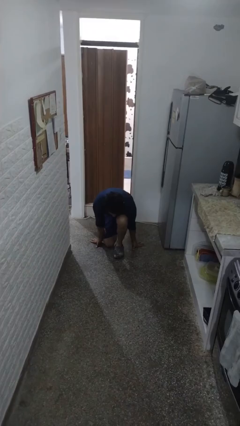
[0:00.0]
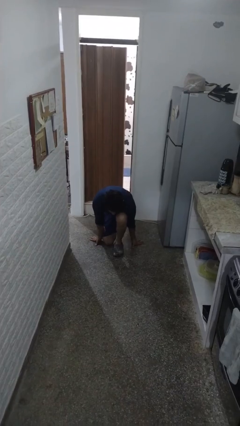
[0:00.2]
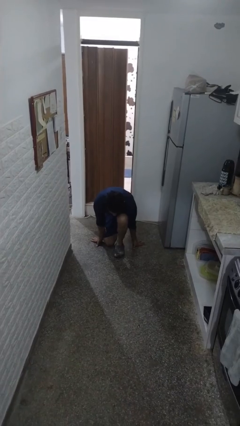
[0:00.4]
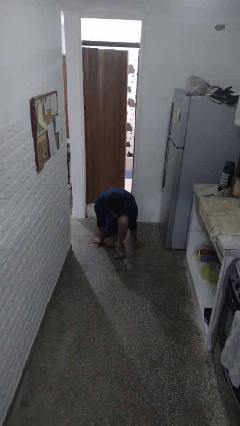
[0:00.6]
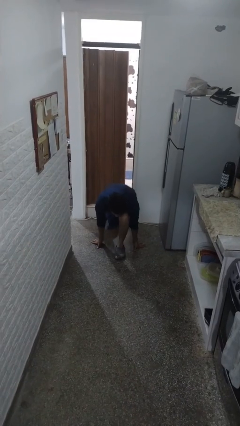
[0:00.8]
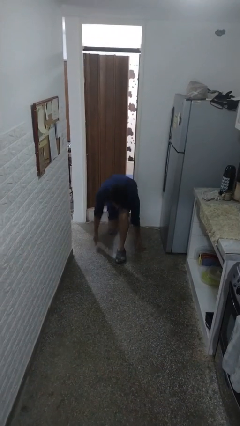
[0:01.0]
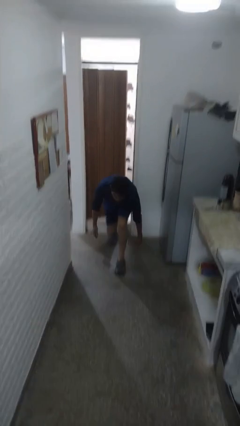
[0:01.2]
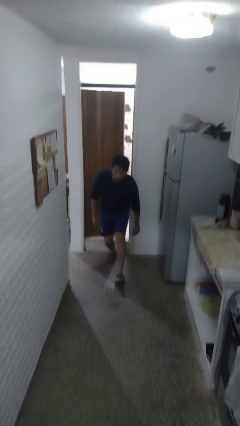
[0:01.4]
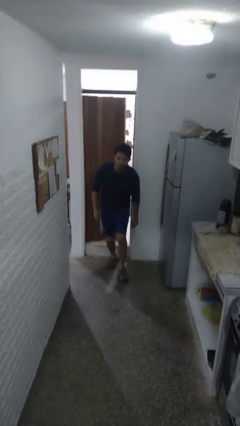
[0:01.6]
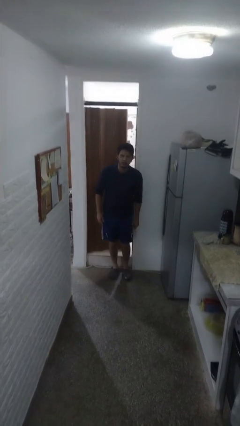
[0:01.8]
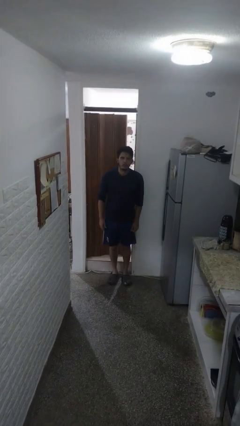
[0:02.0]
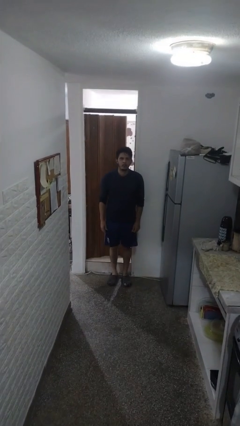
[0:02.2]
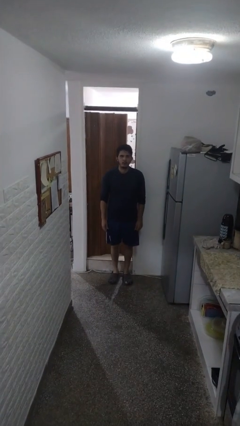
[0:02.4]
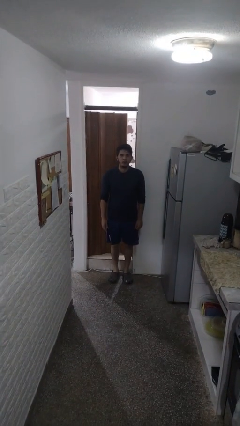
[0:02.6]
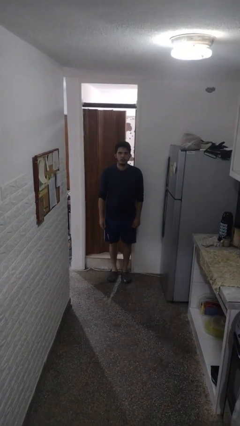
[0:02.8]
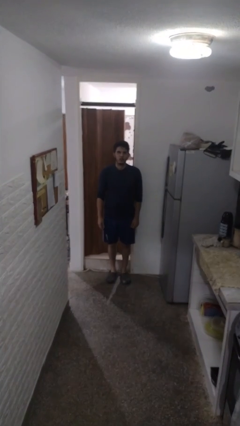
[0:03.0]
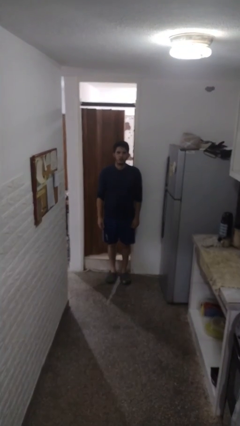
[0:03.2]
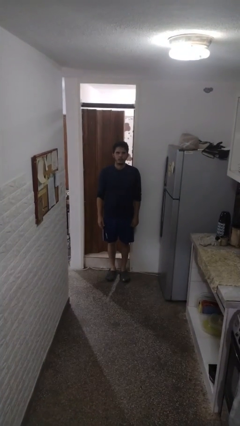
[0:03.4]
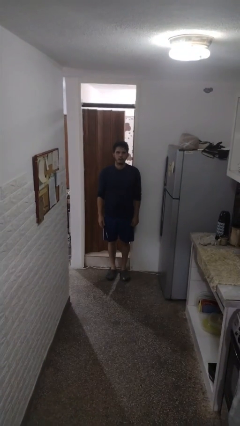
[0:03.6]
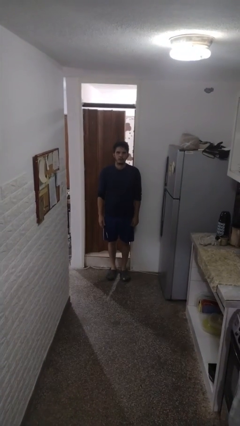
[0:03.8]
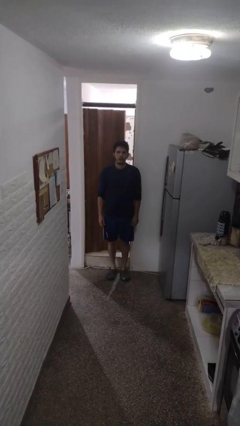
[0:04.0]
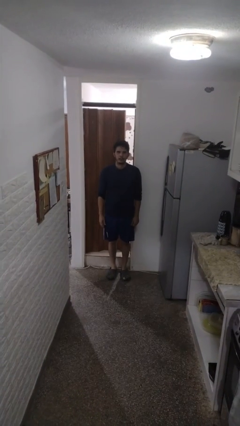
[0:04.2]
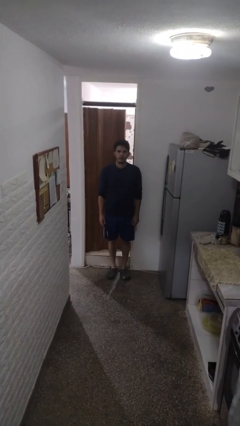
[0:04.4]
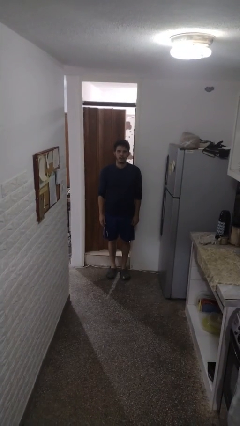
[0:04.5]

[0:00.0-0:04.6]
person stands up from floor

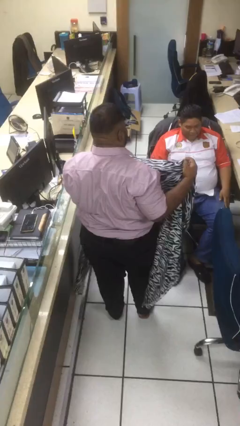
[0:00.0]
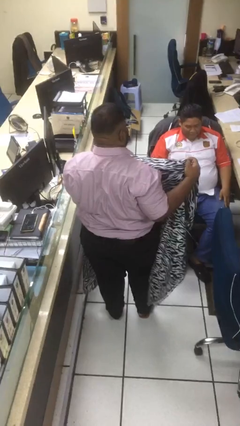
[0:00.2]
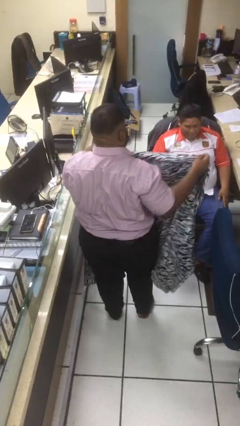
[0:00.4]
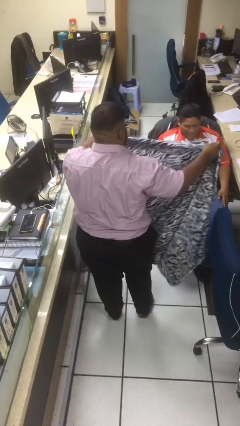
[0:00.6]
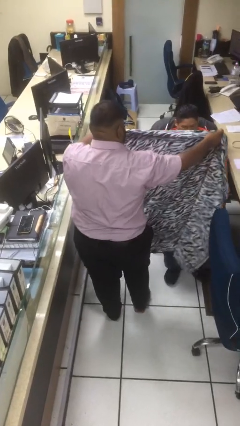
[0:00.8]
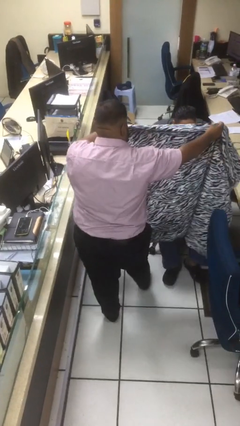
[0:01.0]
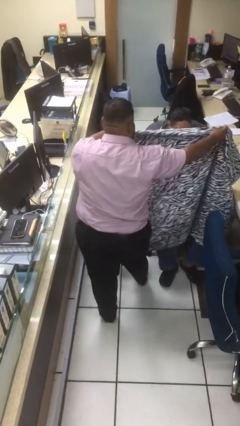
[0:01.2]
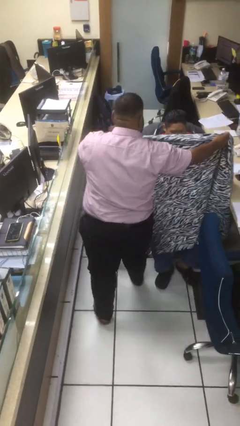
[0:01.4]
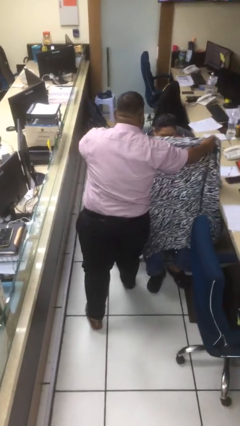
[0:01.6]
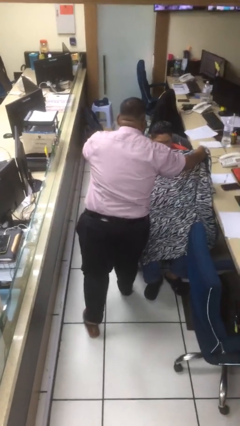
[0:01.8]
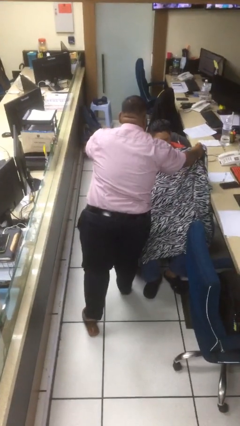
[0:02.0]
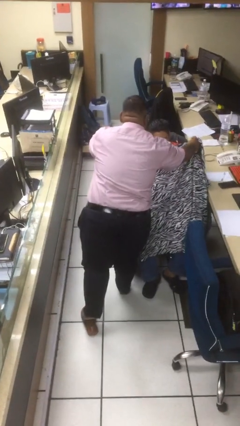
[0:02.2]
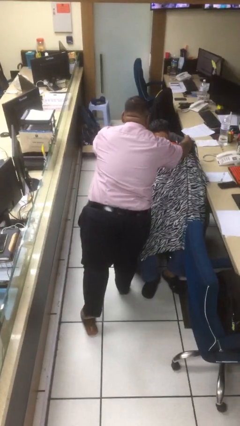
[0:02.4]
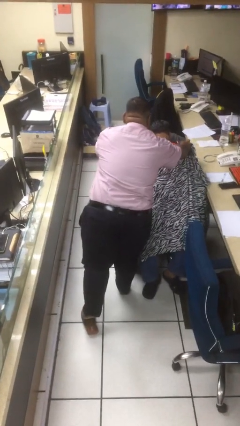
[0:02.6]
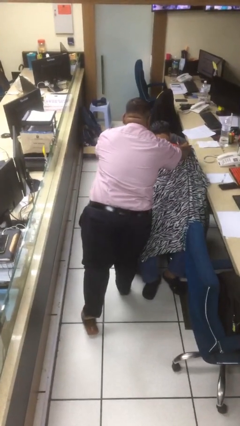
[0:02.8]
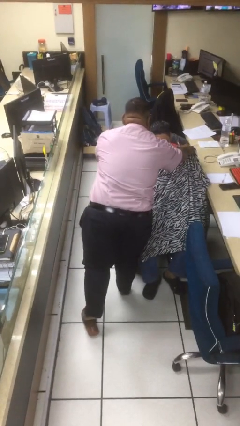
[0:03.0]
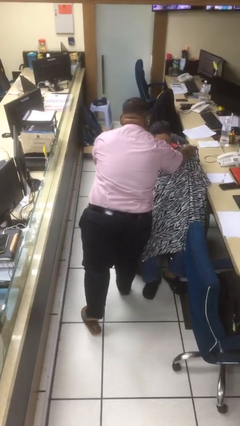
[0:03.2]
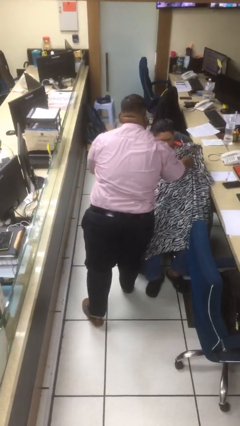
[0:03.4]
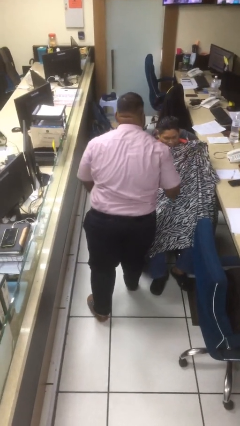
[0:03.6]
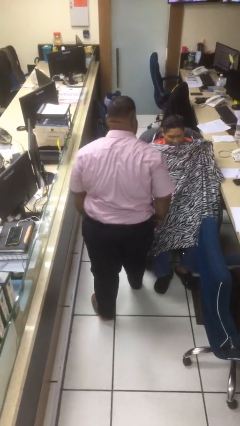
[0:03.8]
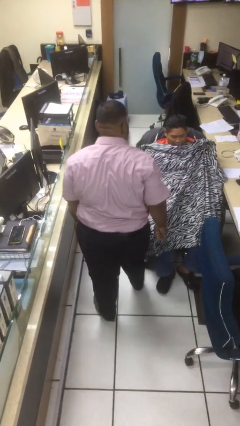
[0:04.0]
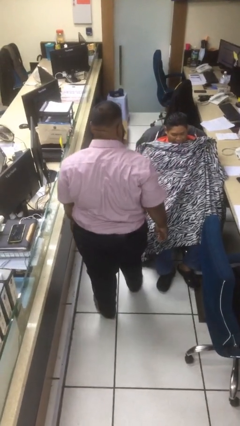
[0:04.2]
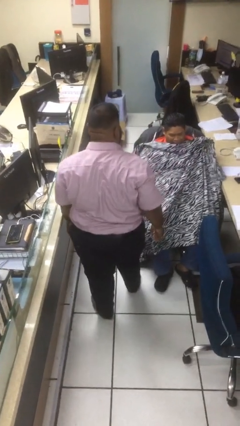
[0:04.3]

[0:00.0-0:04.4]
person covers friend with blanket

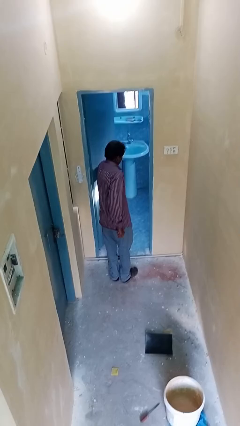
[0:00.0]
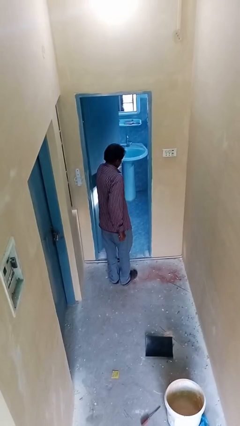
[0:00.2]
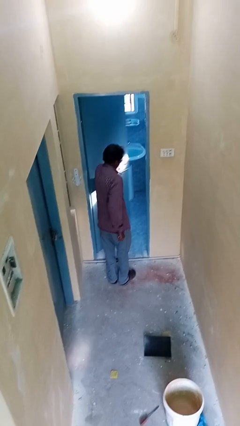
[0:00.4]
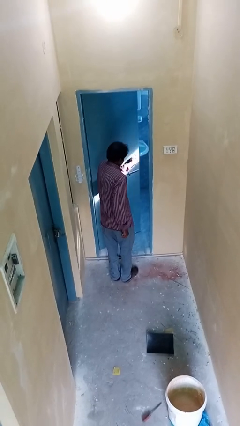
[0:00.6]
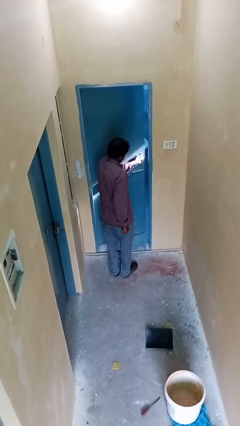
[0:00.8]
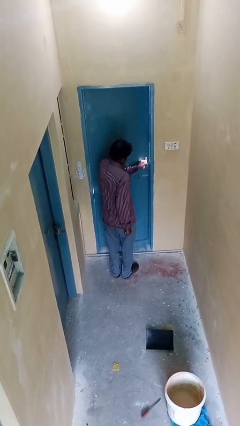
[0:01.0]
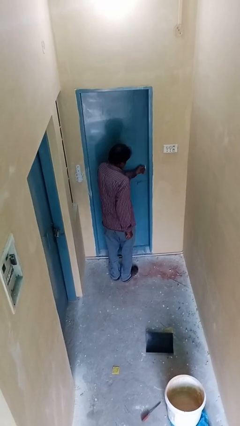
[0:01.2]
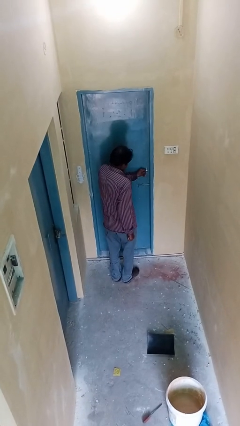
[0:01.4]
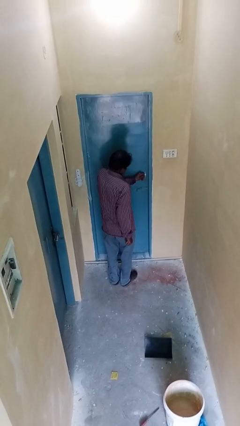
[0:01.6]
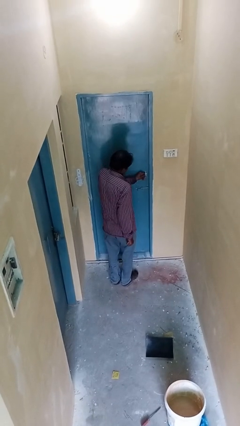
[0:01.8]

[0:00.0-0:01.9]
person closes facility door

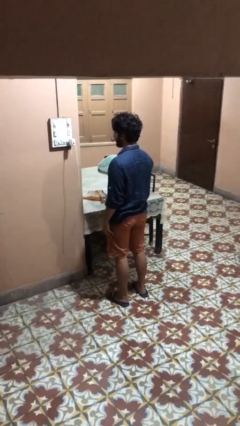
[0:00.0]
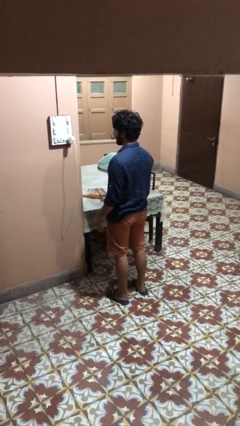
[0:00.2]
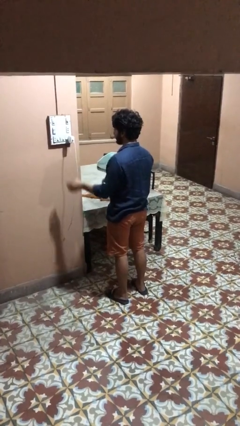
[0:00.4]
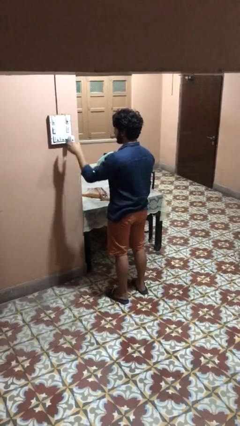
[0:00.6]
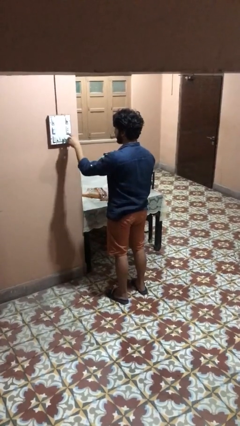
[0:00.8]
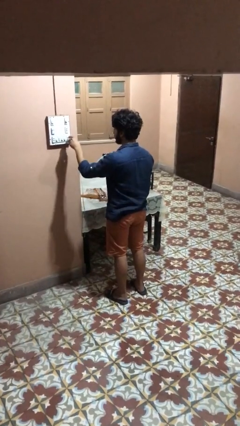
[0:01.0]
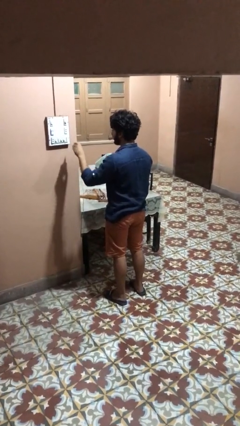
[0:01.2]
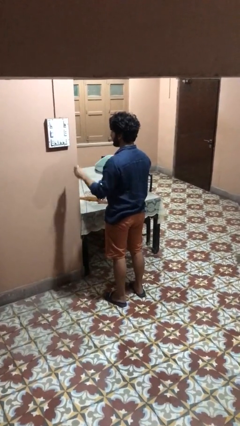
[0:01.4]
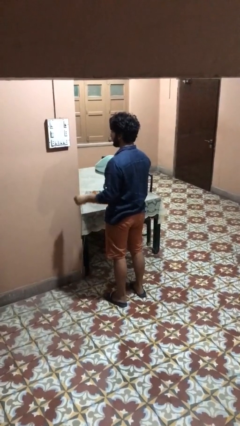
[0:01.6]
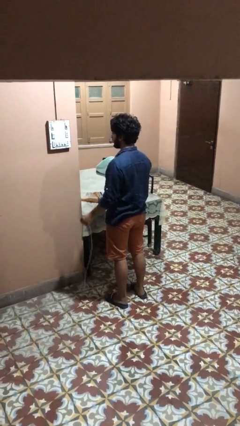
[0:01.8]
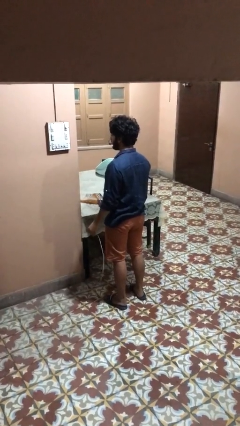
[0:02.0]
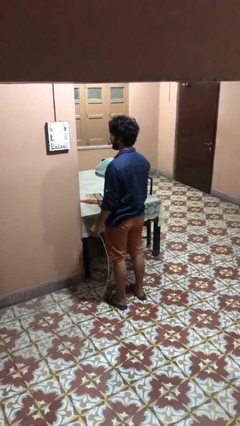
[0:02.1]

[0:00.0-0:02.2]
person unplugs from electrical socket

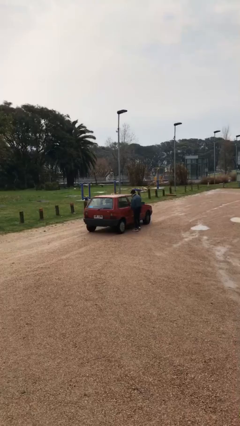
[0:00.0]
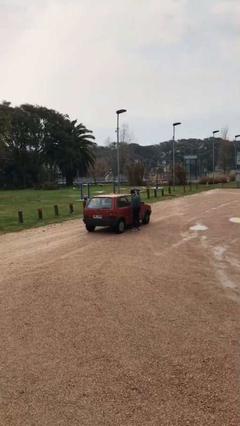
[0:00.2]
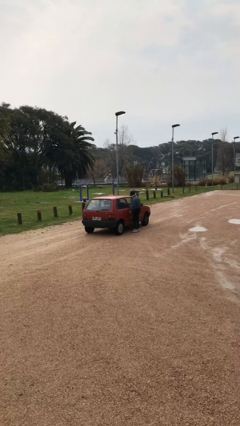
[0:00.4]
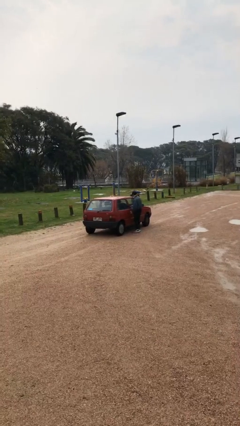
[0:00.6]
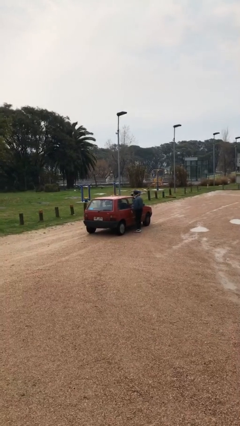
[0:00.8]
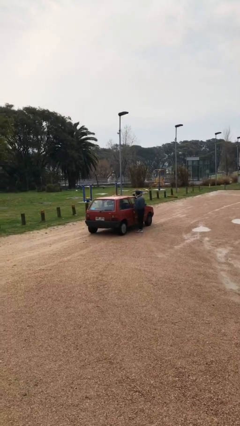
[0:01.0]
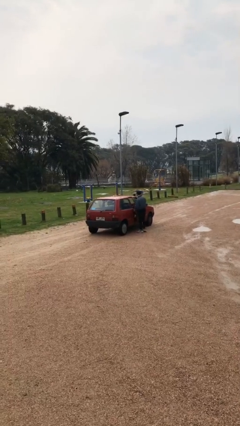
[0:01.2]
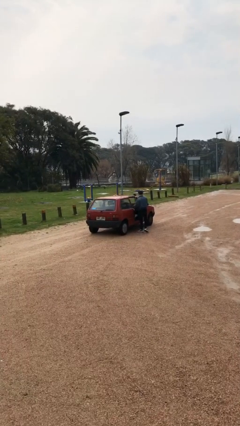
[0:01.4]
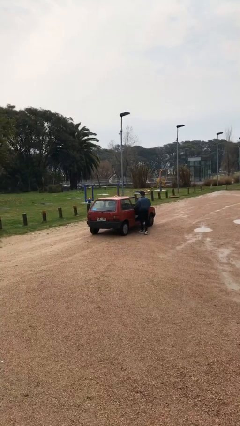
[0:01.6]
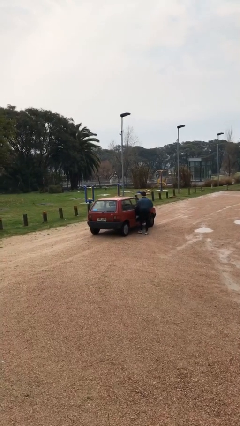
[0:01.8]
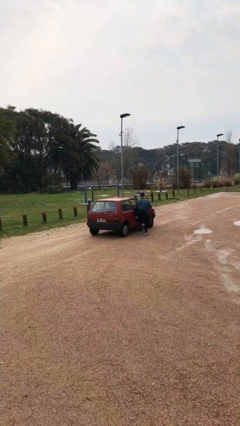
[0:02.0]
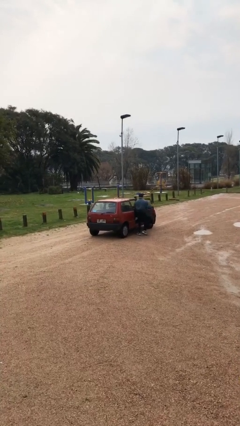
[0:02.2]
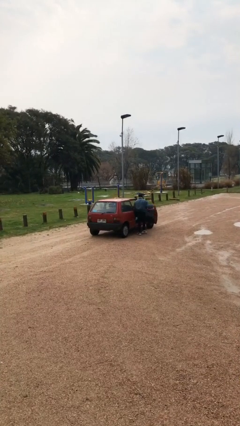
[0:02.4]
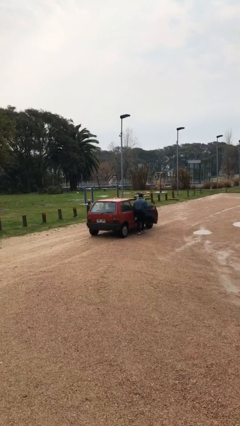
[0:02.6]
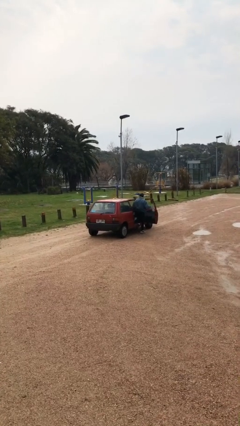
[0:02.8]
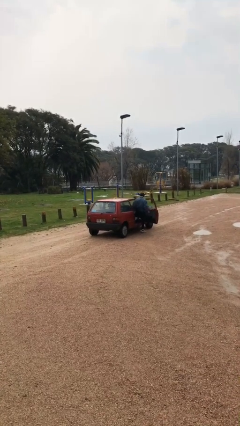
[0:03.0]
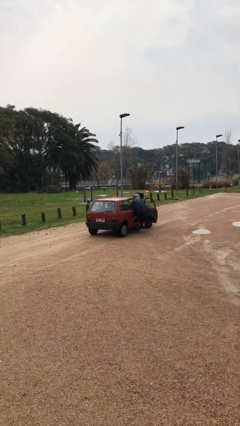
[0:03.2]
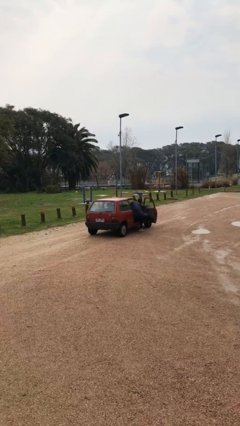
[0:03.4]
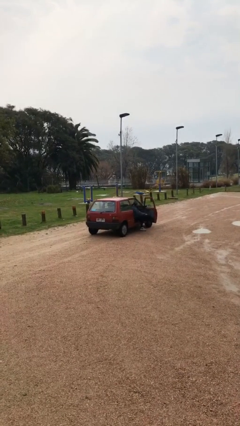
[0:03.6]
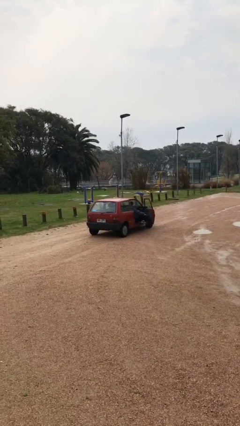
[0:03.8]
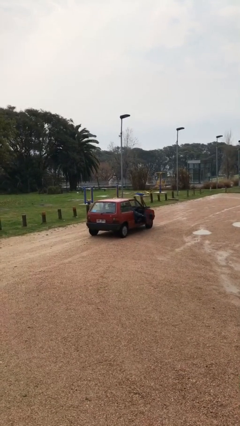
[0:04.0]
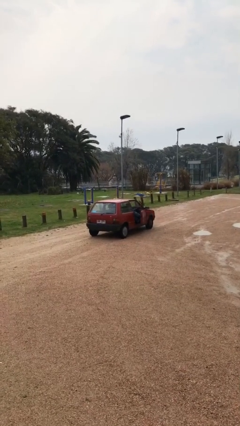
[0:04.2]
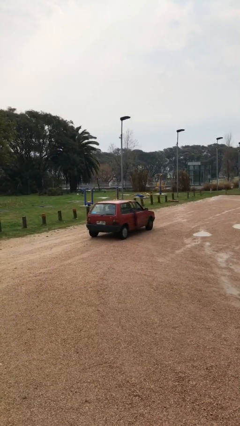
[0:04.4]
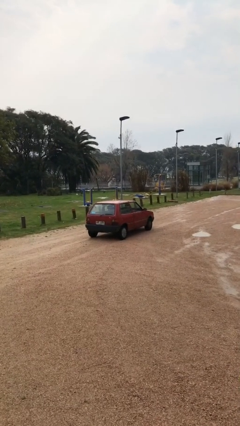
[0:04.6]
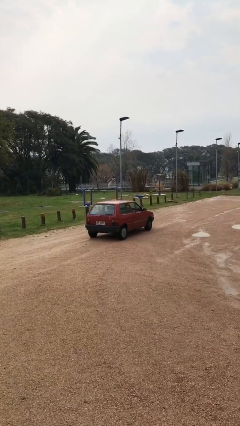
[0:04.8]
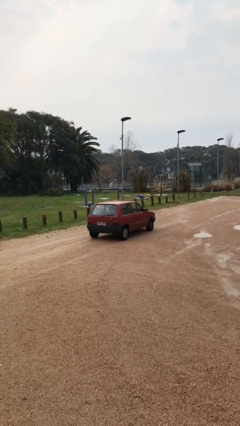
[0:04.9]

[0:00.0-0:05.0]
car picks up person
